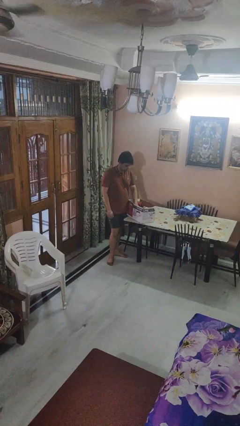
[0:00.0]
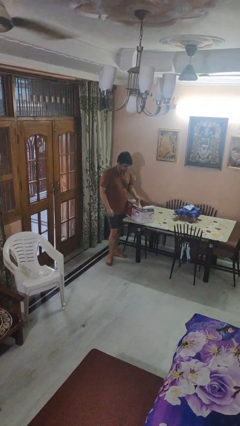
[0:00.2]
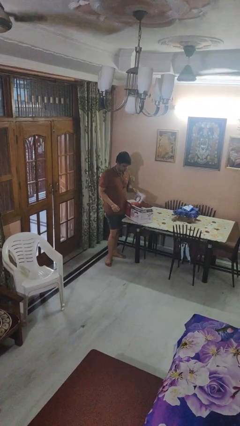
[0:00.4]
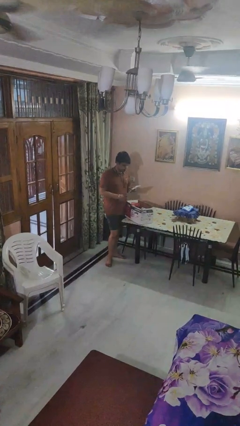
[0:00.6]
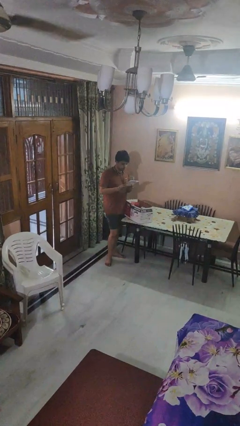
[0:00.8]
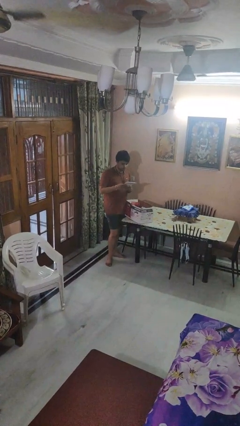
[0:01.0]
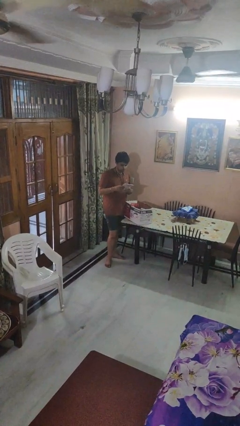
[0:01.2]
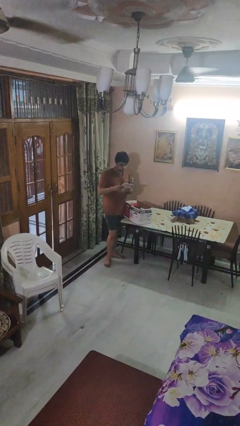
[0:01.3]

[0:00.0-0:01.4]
person takes object from box

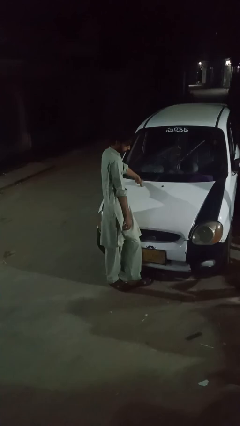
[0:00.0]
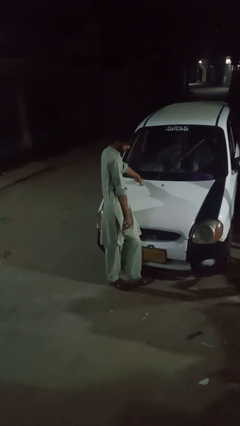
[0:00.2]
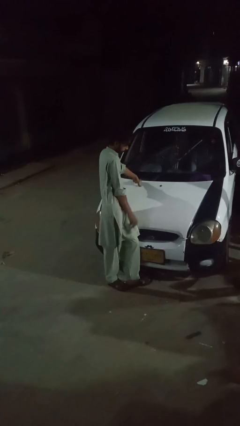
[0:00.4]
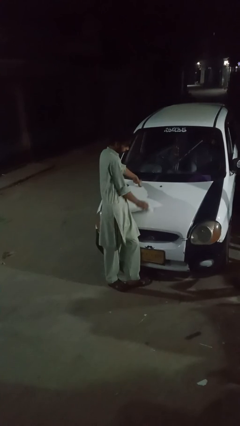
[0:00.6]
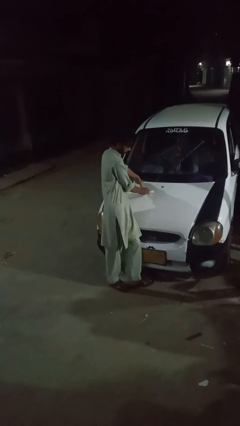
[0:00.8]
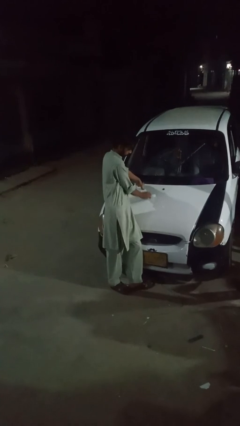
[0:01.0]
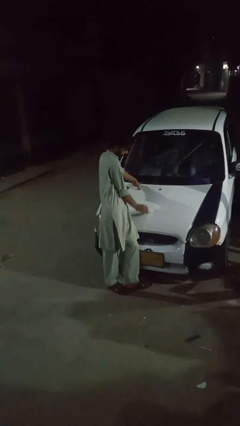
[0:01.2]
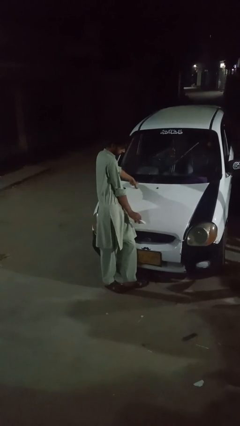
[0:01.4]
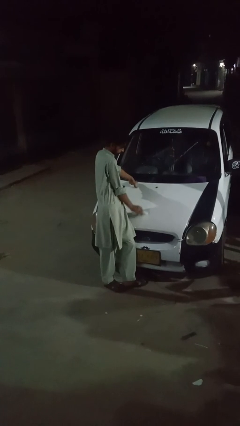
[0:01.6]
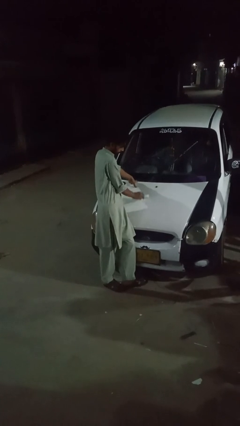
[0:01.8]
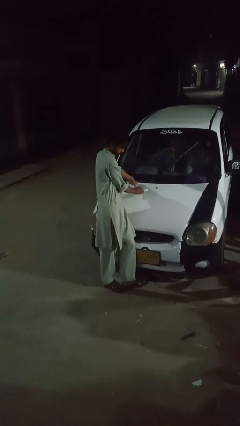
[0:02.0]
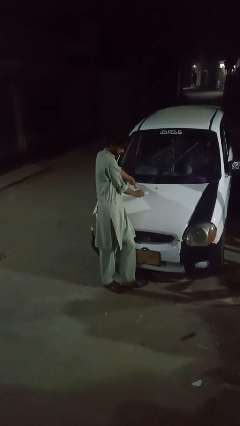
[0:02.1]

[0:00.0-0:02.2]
person polishes car with rag

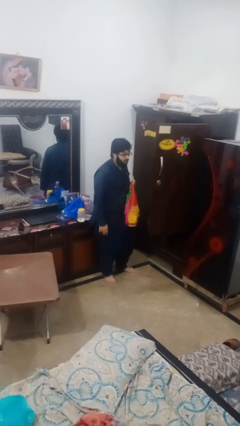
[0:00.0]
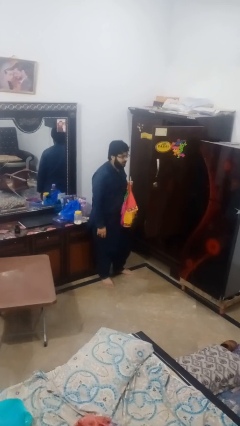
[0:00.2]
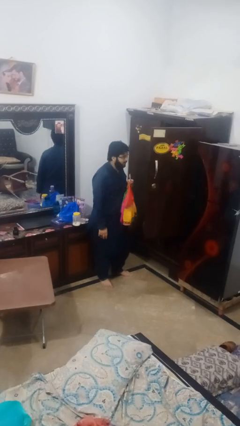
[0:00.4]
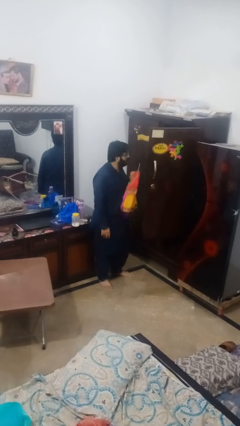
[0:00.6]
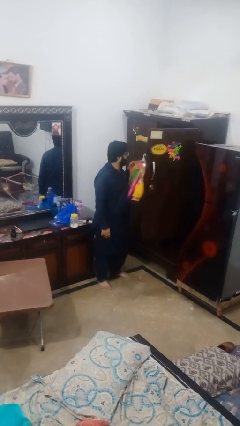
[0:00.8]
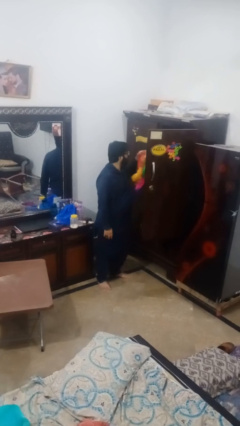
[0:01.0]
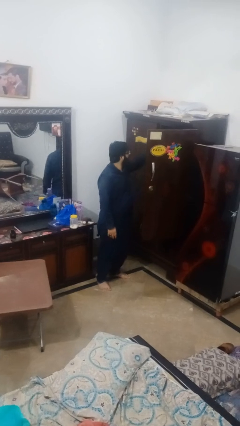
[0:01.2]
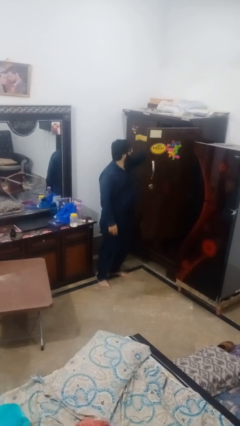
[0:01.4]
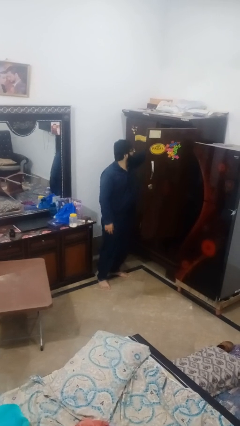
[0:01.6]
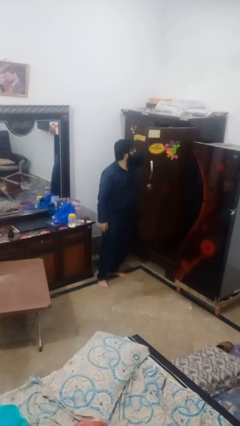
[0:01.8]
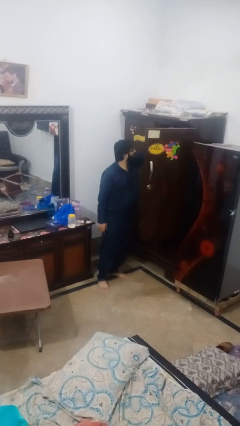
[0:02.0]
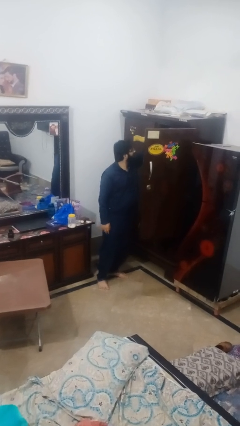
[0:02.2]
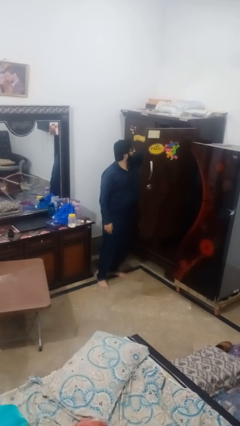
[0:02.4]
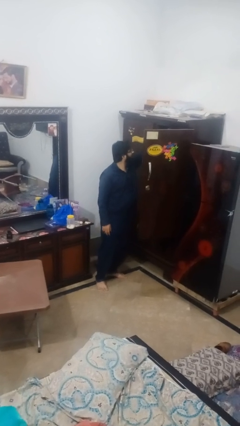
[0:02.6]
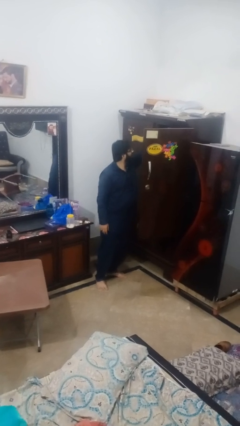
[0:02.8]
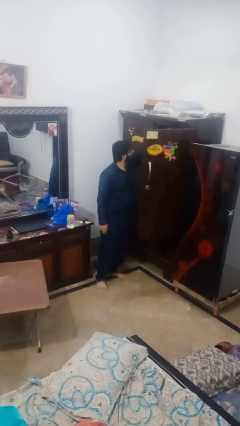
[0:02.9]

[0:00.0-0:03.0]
person puts clothes into closet

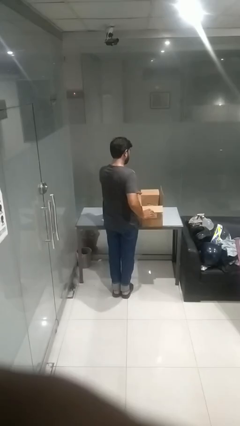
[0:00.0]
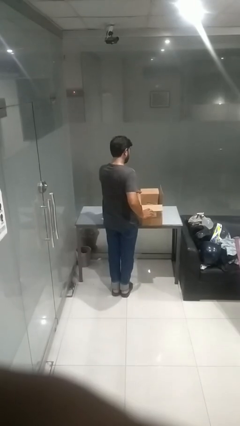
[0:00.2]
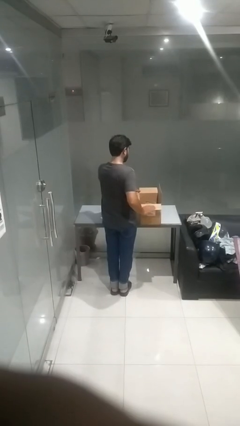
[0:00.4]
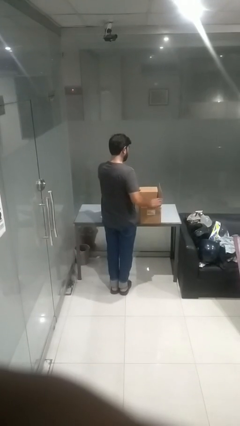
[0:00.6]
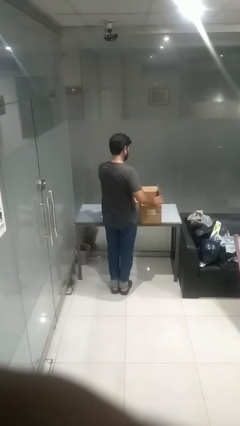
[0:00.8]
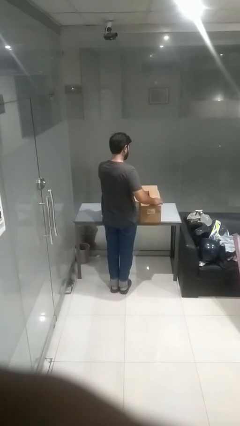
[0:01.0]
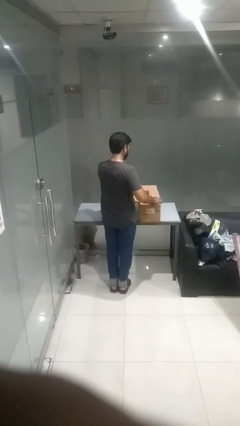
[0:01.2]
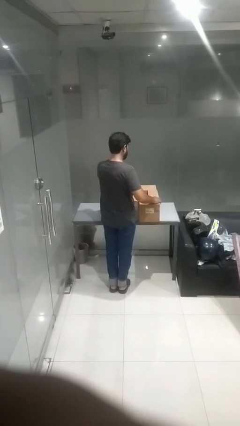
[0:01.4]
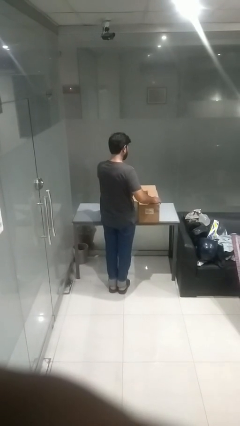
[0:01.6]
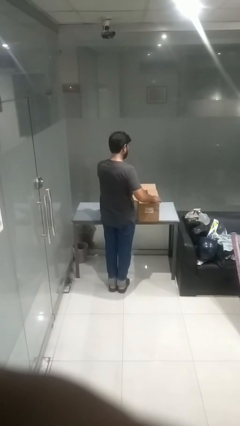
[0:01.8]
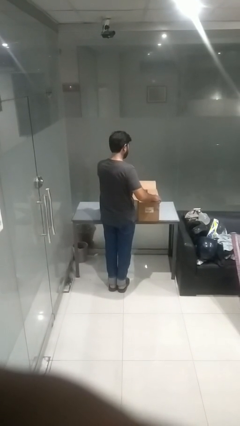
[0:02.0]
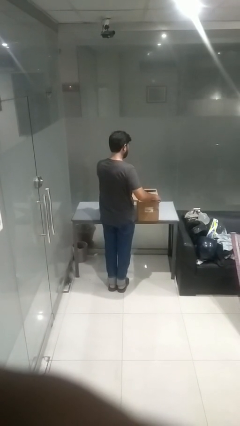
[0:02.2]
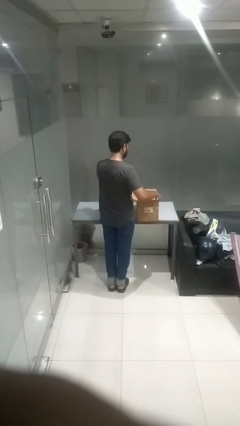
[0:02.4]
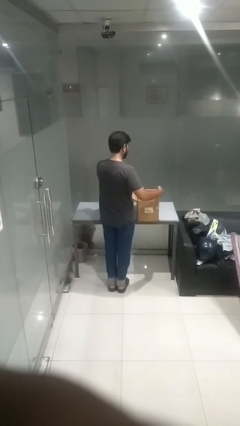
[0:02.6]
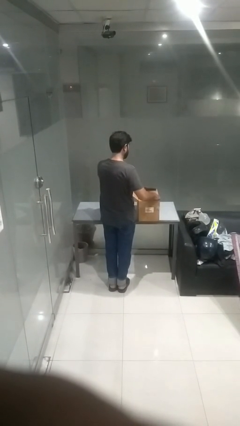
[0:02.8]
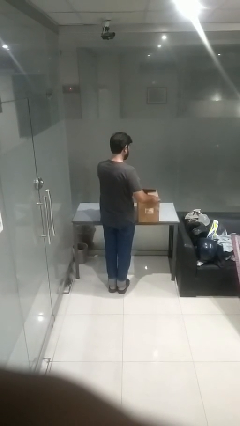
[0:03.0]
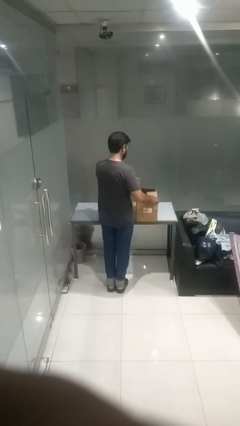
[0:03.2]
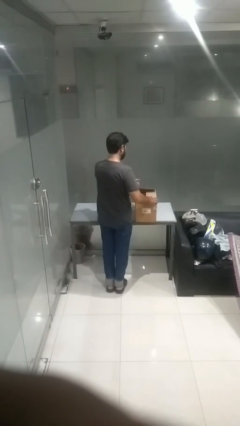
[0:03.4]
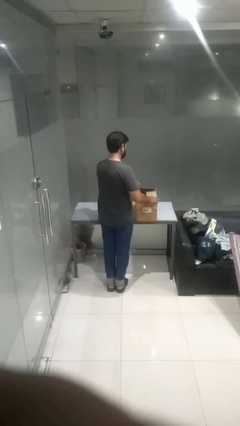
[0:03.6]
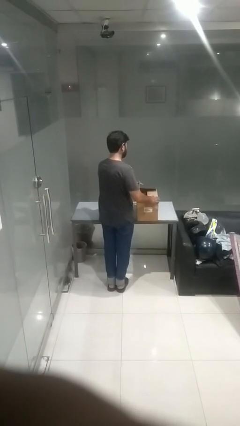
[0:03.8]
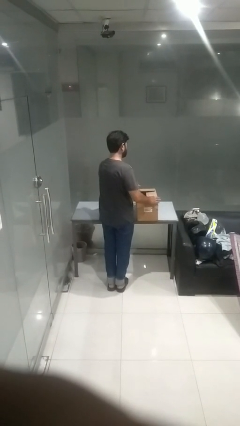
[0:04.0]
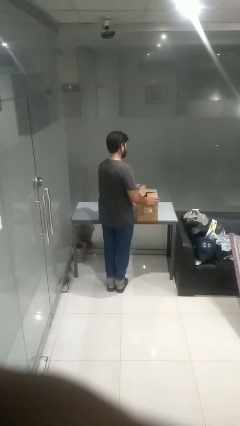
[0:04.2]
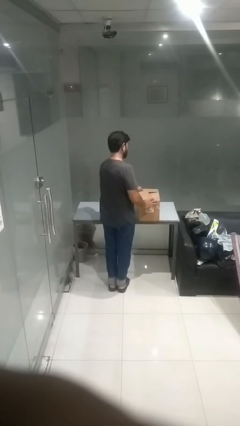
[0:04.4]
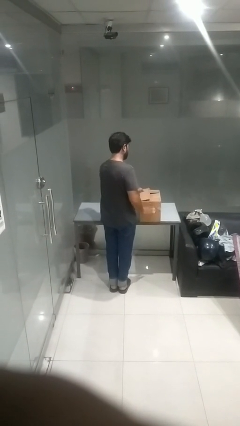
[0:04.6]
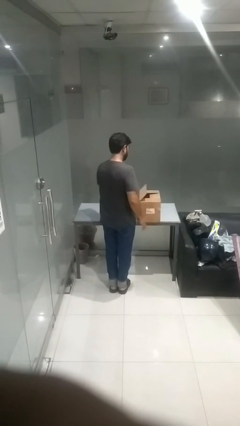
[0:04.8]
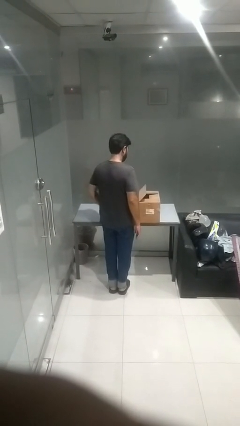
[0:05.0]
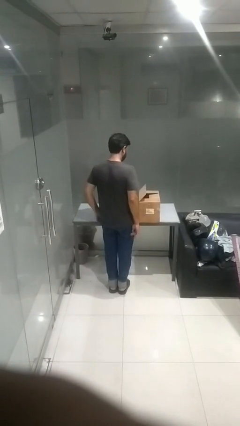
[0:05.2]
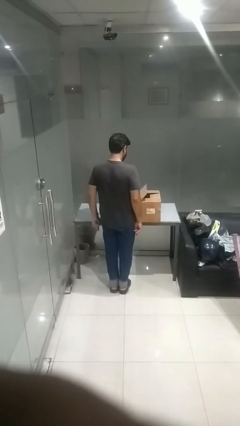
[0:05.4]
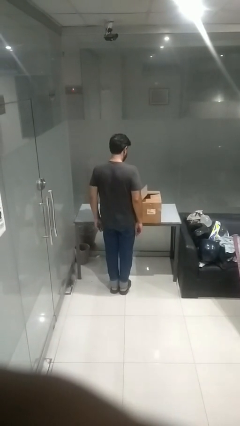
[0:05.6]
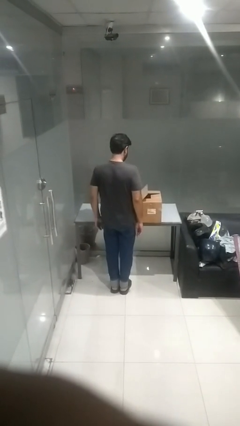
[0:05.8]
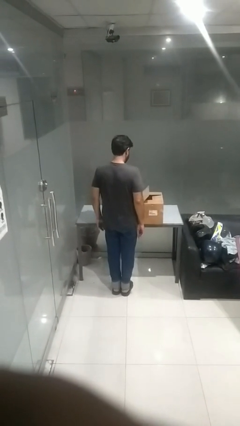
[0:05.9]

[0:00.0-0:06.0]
person closes box

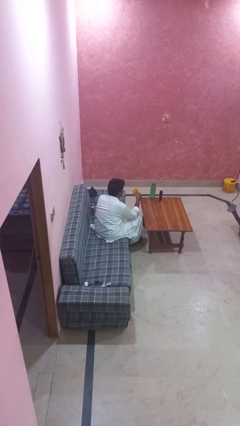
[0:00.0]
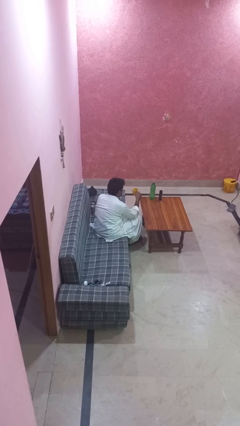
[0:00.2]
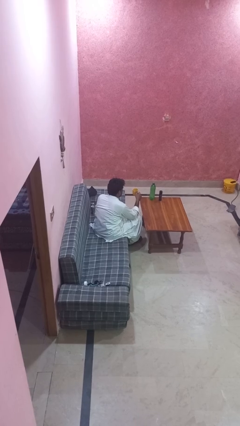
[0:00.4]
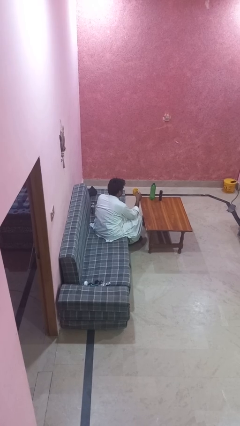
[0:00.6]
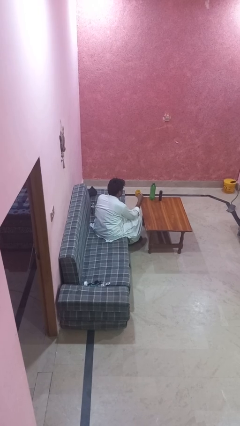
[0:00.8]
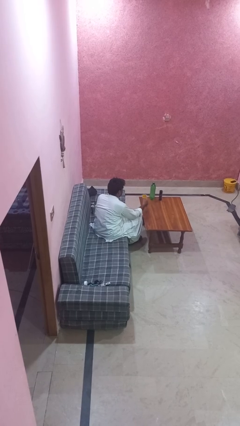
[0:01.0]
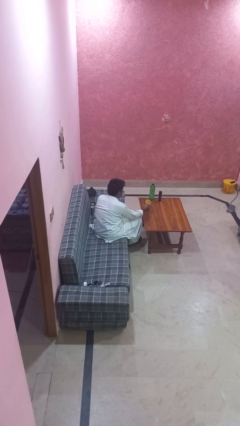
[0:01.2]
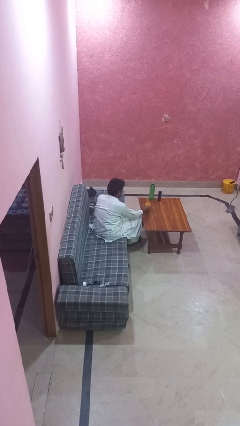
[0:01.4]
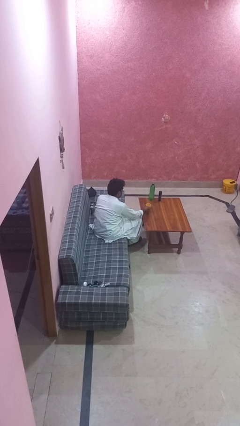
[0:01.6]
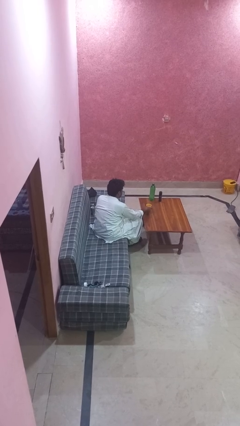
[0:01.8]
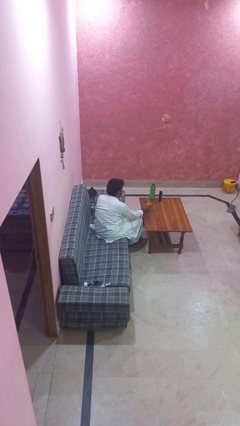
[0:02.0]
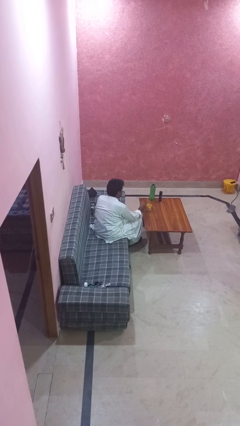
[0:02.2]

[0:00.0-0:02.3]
person puts down object on table

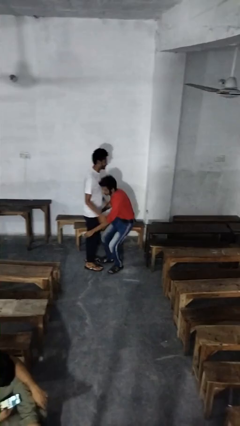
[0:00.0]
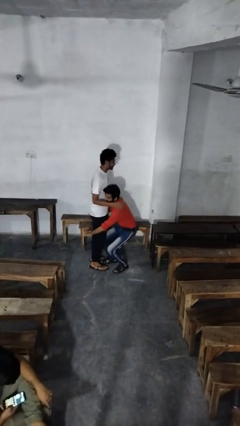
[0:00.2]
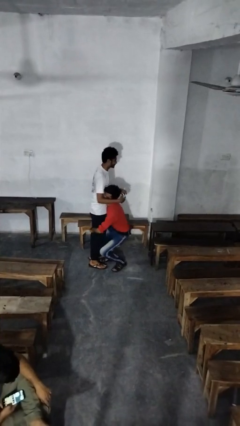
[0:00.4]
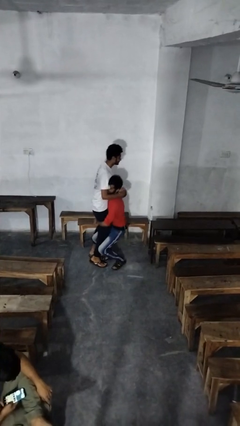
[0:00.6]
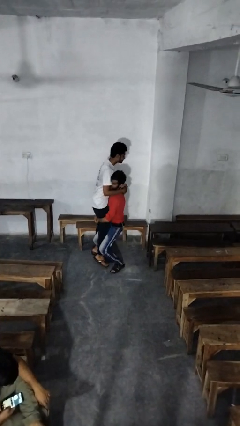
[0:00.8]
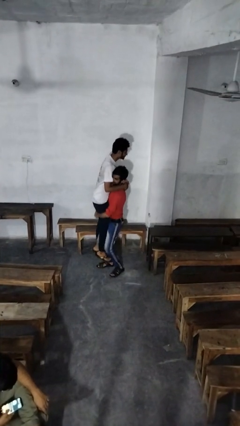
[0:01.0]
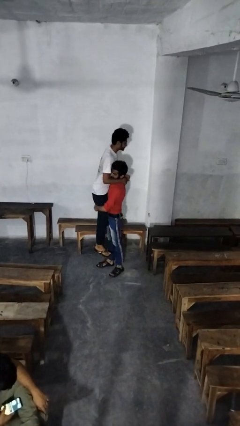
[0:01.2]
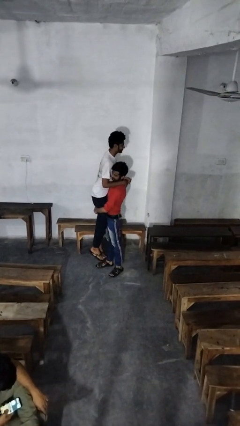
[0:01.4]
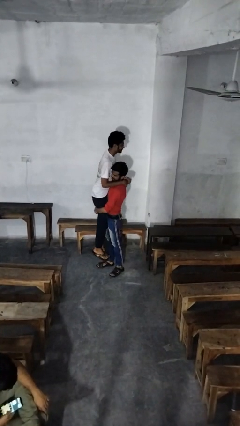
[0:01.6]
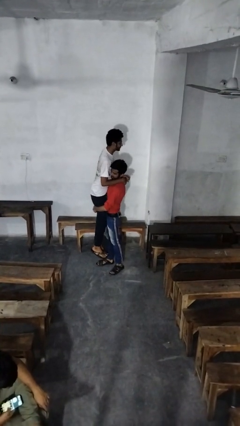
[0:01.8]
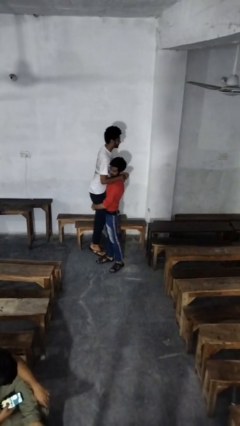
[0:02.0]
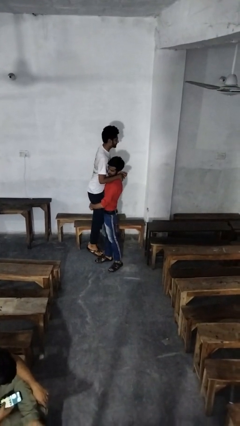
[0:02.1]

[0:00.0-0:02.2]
person picks up person

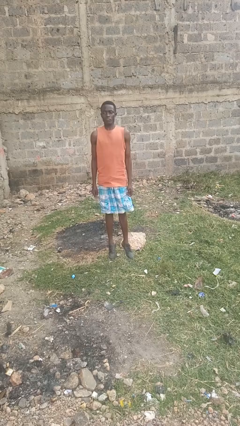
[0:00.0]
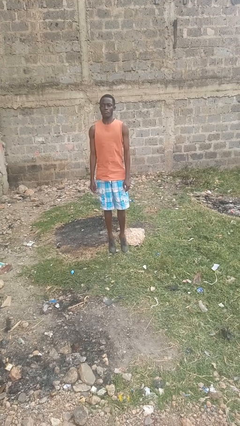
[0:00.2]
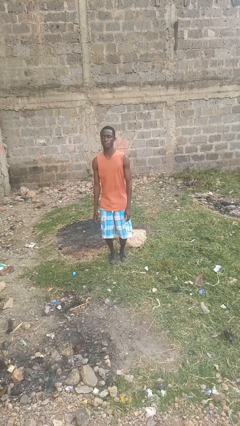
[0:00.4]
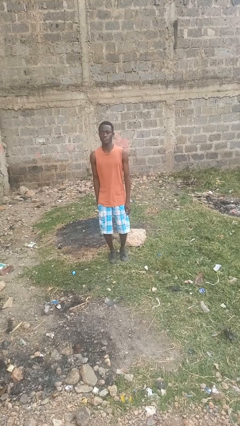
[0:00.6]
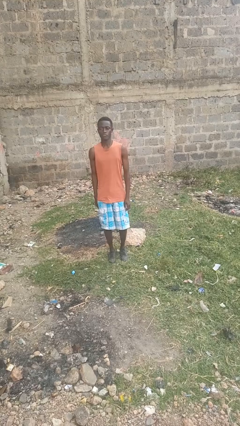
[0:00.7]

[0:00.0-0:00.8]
person jumps
